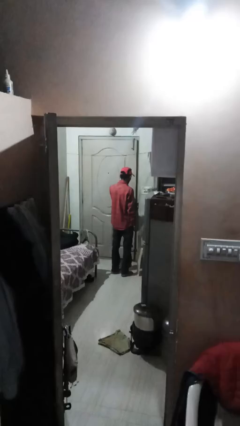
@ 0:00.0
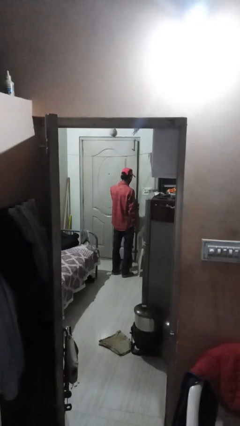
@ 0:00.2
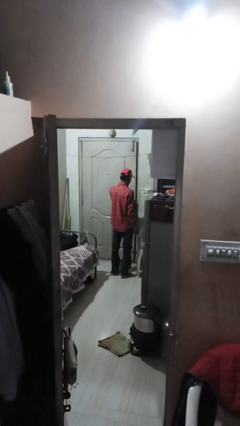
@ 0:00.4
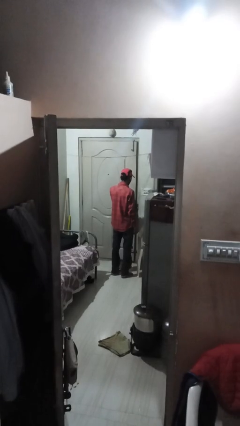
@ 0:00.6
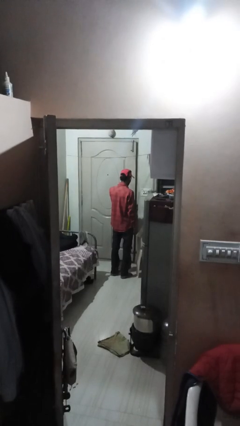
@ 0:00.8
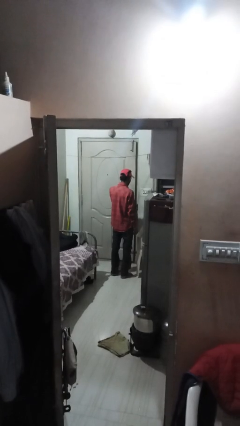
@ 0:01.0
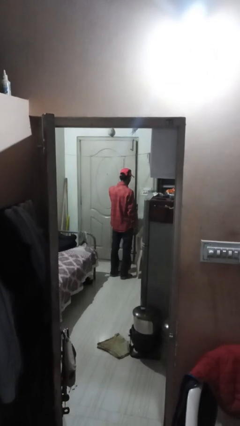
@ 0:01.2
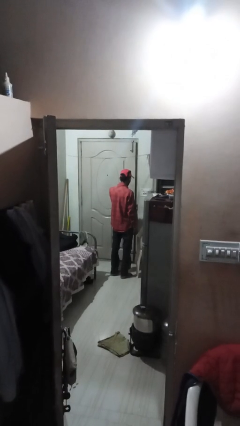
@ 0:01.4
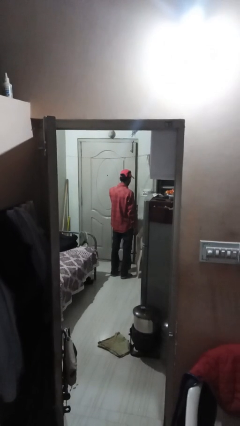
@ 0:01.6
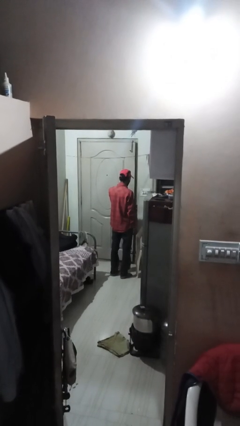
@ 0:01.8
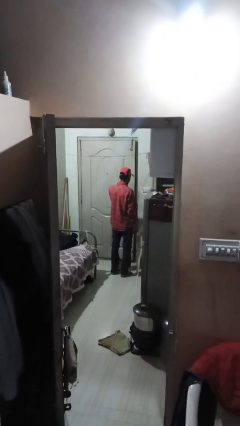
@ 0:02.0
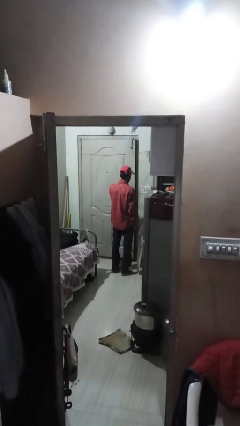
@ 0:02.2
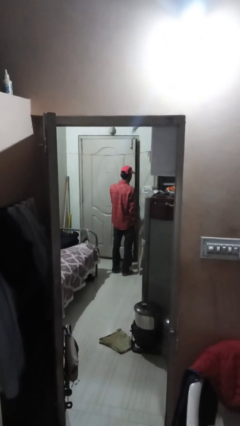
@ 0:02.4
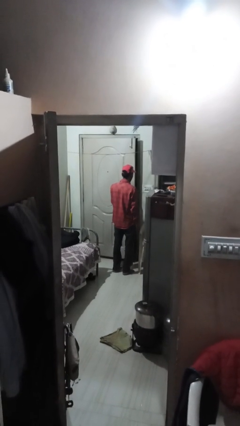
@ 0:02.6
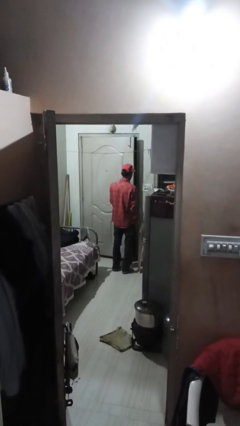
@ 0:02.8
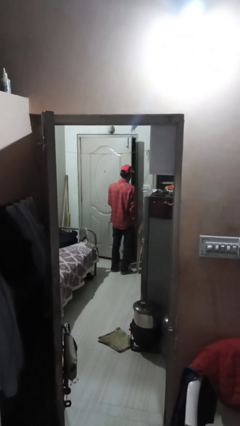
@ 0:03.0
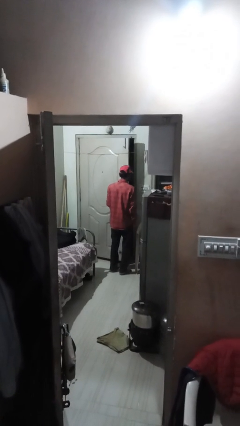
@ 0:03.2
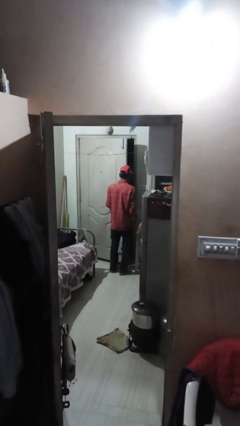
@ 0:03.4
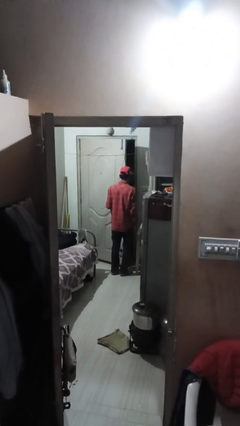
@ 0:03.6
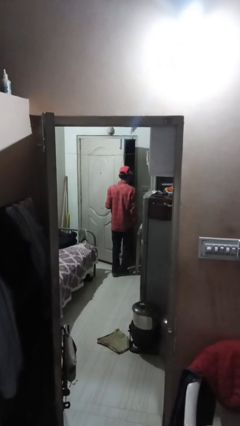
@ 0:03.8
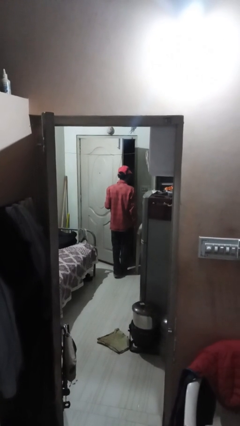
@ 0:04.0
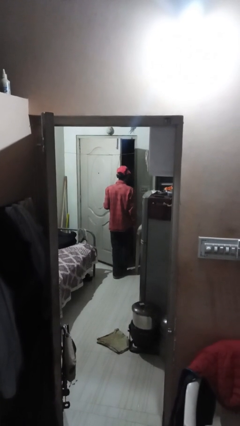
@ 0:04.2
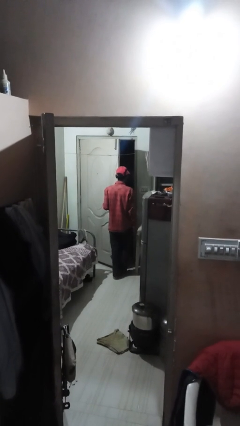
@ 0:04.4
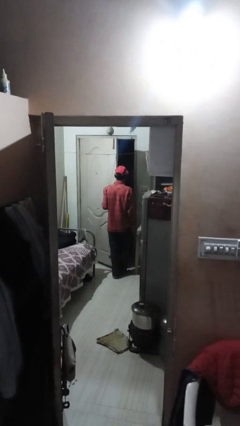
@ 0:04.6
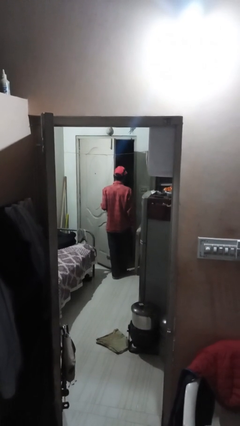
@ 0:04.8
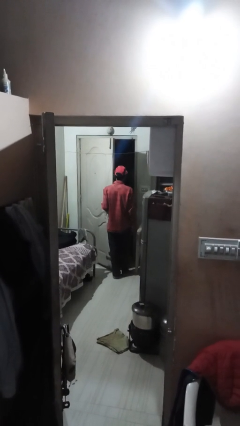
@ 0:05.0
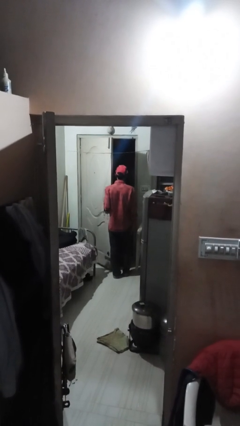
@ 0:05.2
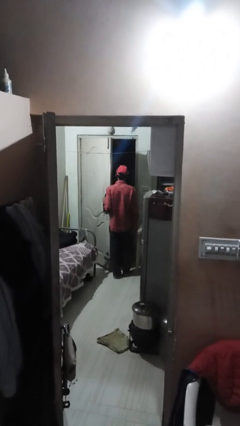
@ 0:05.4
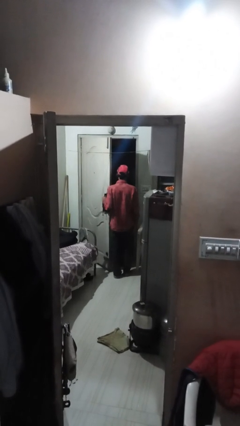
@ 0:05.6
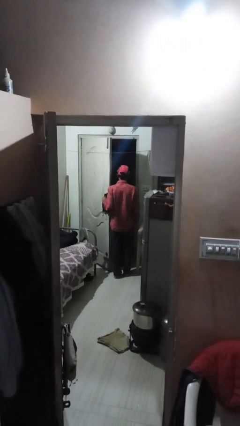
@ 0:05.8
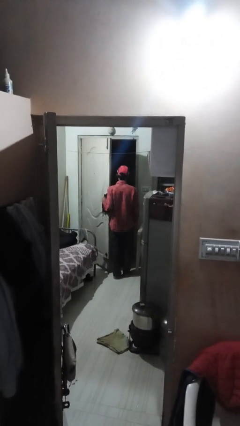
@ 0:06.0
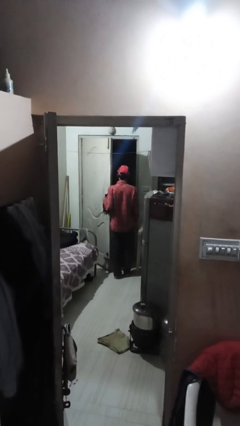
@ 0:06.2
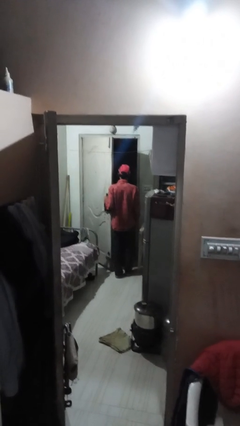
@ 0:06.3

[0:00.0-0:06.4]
person opens facility door

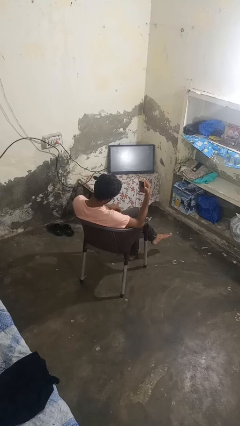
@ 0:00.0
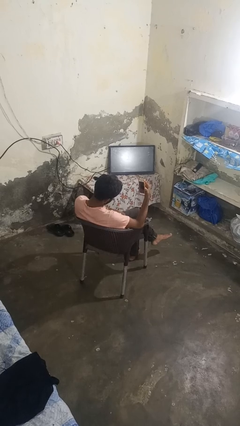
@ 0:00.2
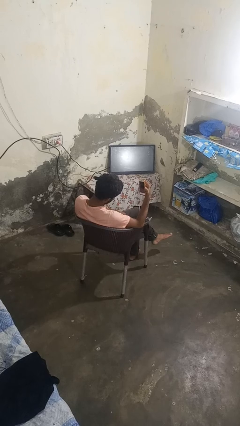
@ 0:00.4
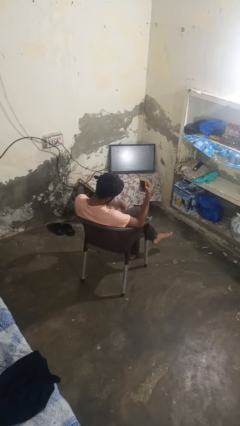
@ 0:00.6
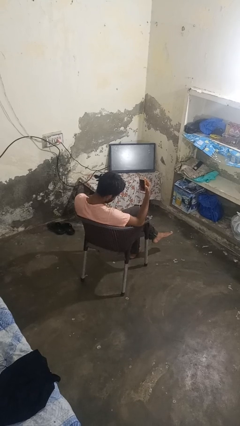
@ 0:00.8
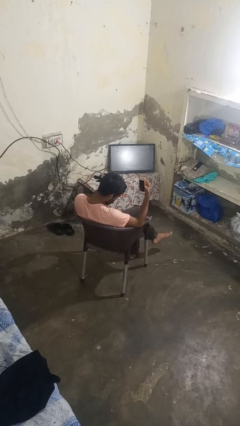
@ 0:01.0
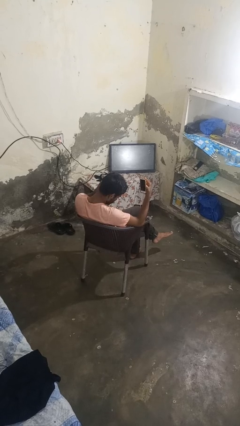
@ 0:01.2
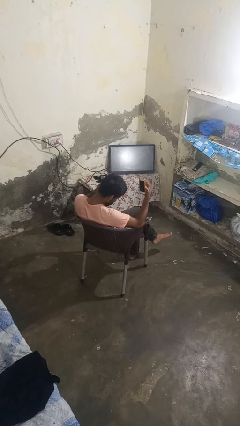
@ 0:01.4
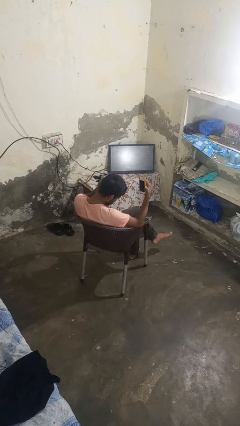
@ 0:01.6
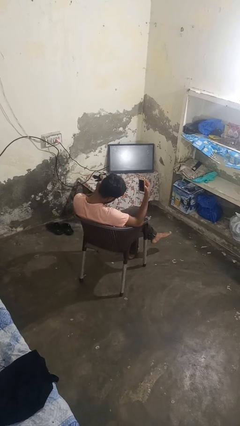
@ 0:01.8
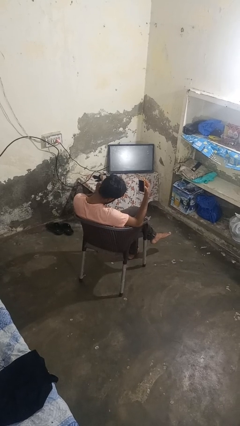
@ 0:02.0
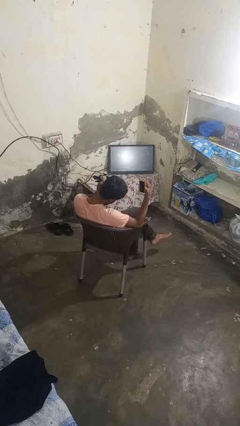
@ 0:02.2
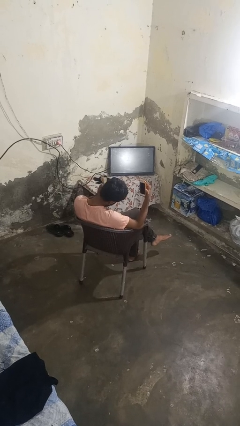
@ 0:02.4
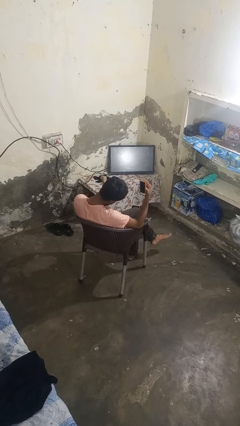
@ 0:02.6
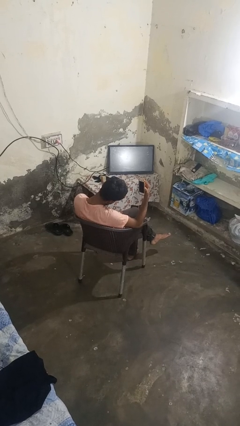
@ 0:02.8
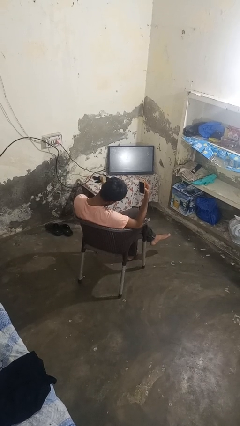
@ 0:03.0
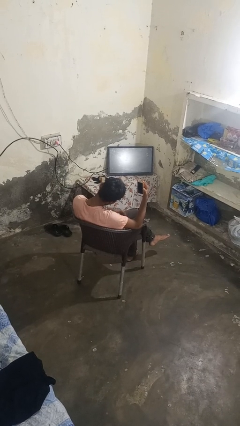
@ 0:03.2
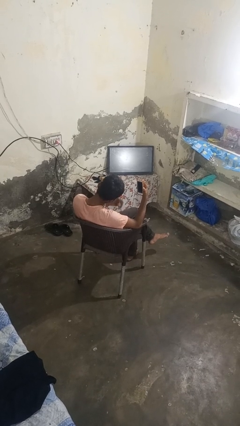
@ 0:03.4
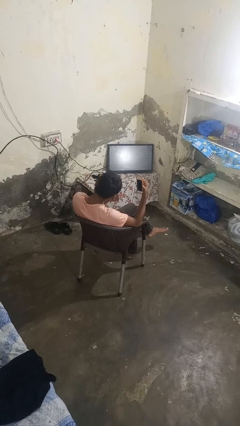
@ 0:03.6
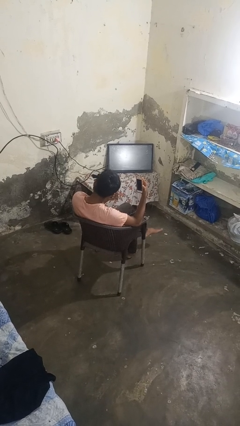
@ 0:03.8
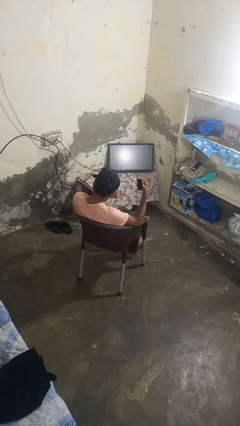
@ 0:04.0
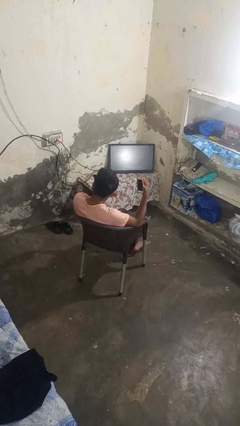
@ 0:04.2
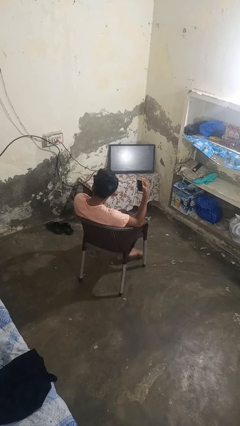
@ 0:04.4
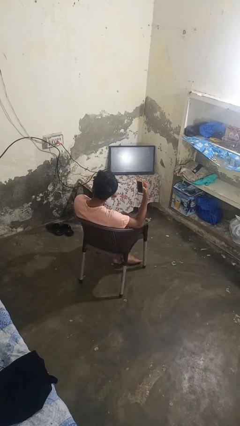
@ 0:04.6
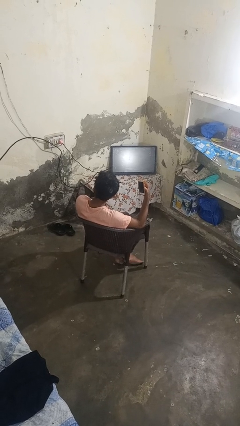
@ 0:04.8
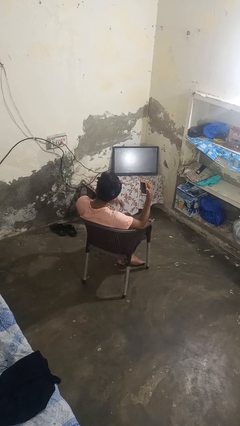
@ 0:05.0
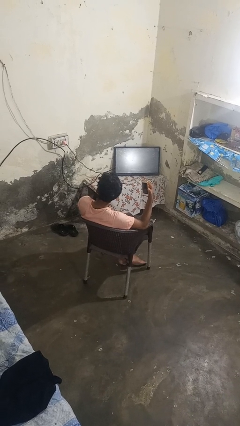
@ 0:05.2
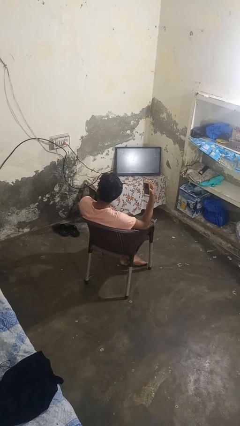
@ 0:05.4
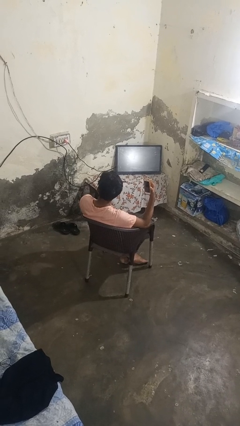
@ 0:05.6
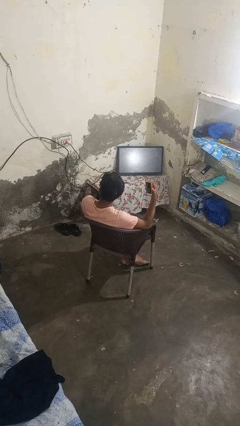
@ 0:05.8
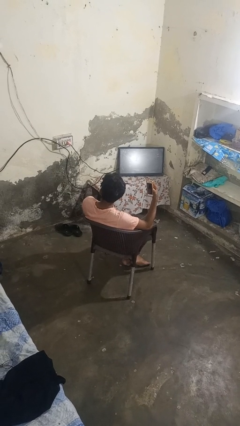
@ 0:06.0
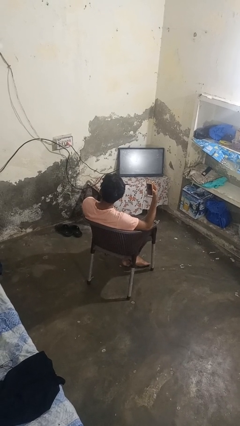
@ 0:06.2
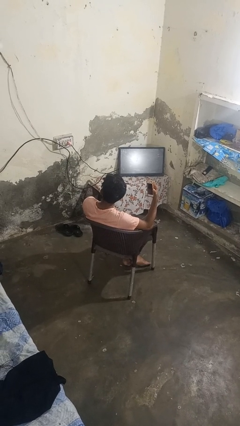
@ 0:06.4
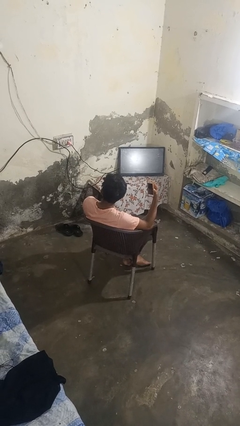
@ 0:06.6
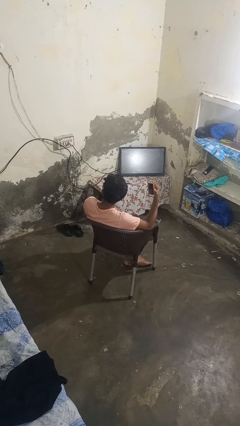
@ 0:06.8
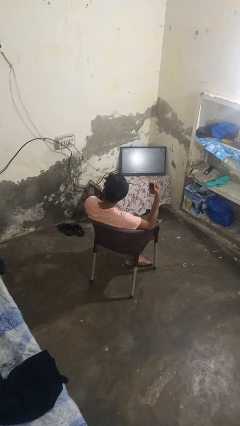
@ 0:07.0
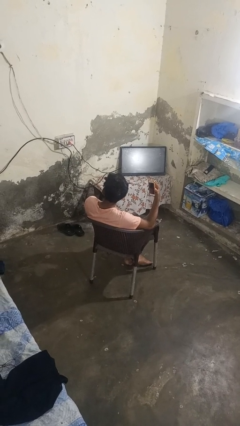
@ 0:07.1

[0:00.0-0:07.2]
person puts on headphones

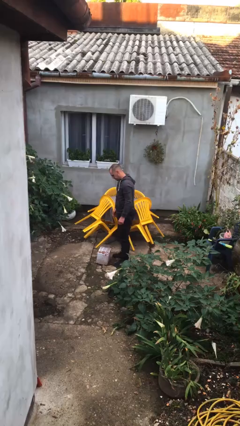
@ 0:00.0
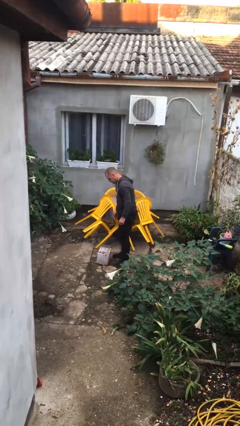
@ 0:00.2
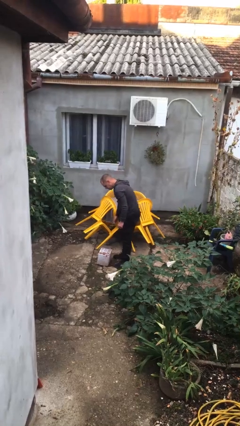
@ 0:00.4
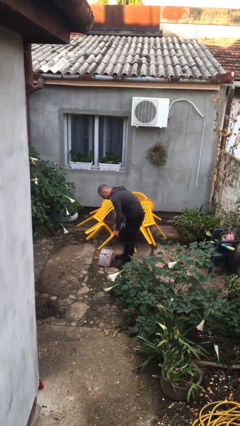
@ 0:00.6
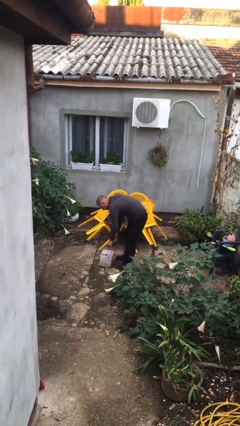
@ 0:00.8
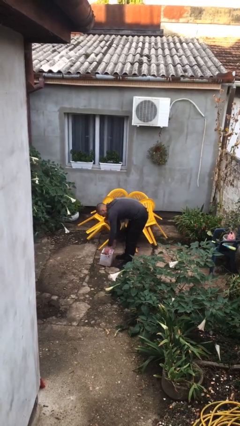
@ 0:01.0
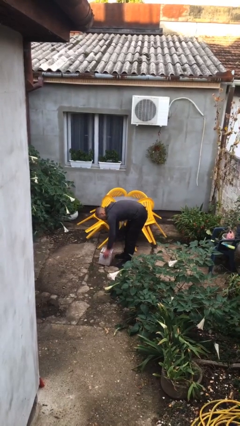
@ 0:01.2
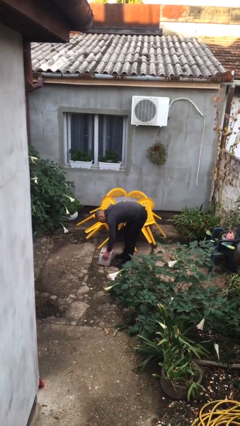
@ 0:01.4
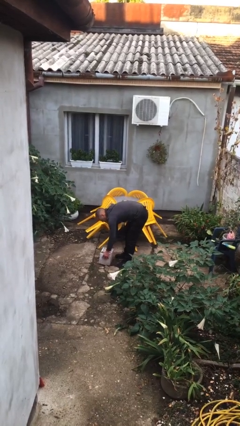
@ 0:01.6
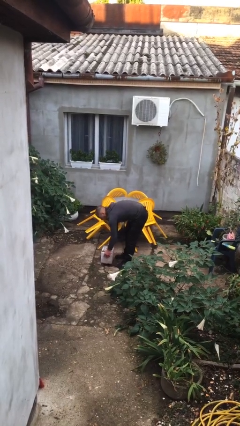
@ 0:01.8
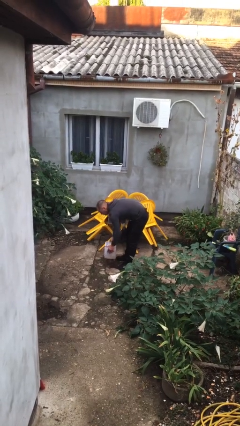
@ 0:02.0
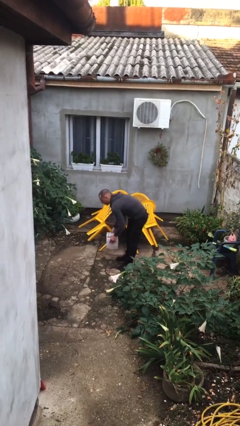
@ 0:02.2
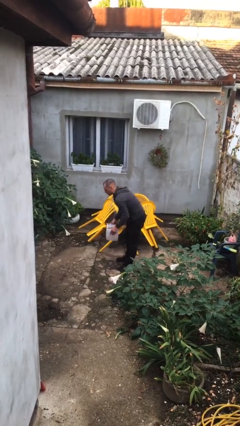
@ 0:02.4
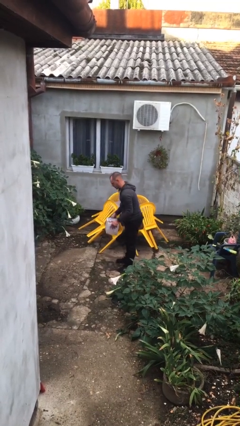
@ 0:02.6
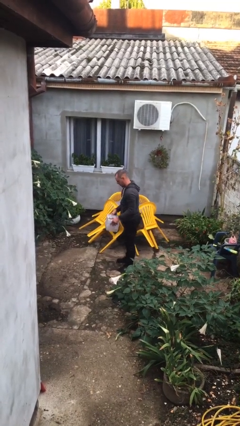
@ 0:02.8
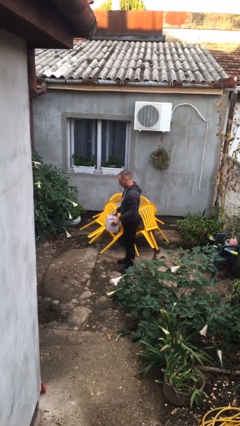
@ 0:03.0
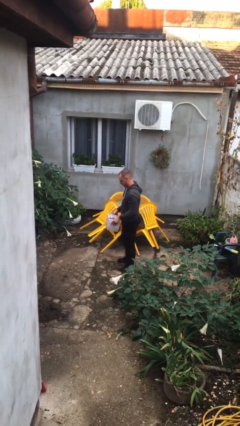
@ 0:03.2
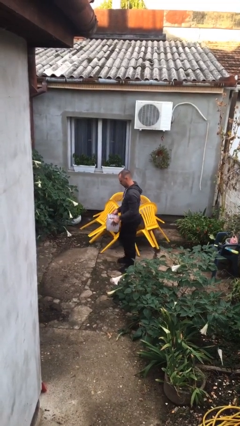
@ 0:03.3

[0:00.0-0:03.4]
person picks up object from floor

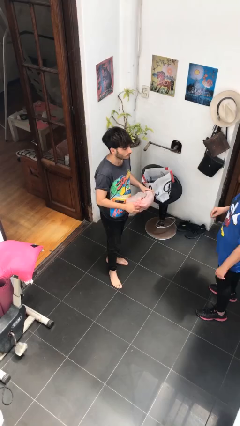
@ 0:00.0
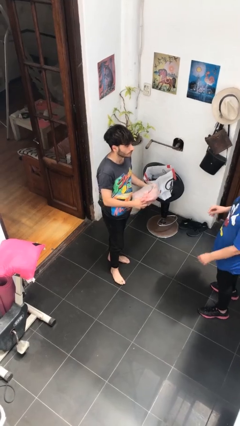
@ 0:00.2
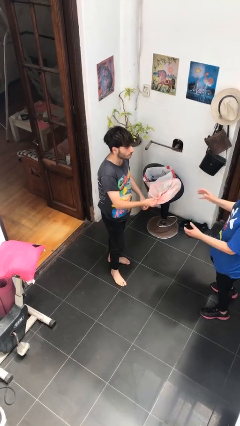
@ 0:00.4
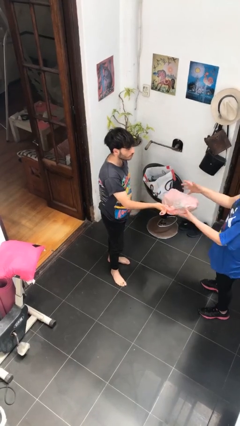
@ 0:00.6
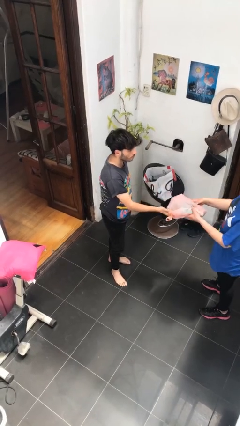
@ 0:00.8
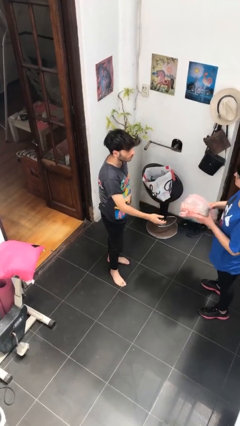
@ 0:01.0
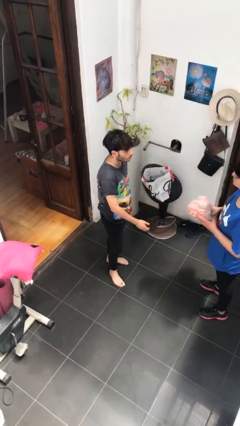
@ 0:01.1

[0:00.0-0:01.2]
person transfers object to person
